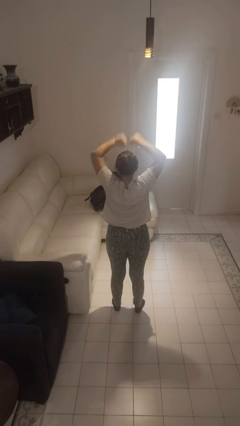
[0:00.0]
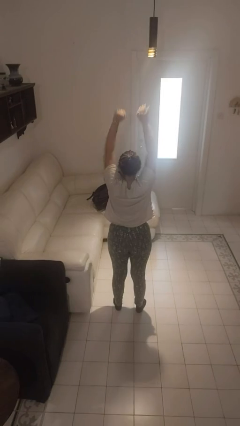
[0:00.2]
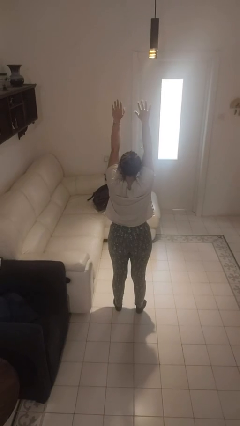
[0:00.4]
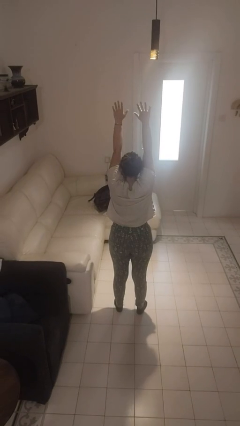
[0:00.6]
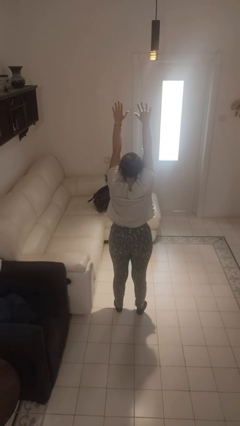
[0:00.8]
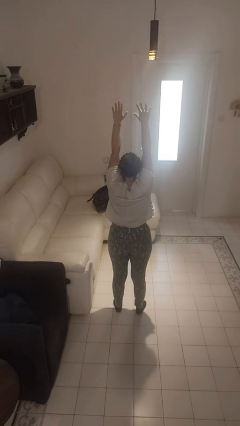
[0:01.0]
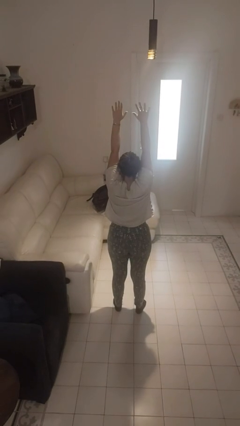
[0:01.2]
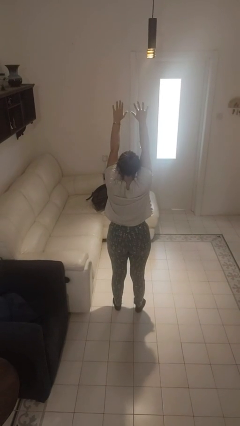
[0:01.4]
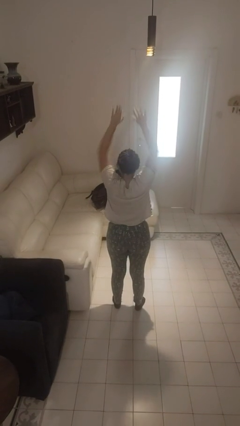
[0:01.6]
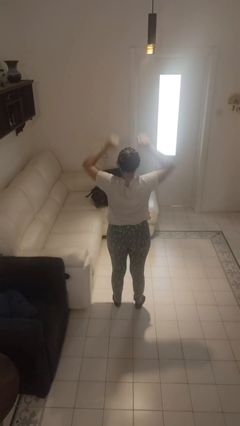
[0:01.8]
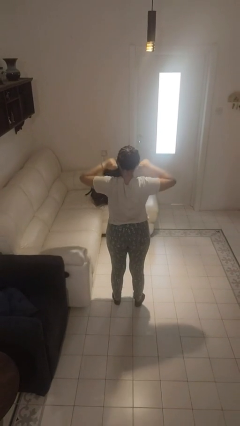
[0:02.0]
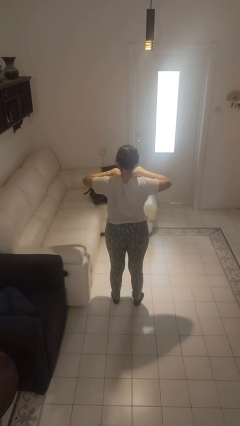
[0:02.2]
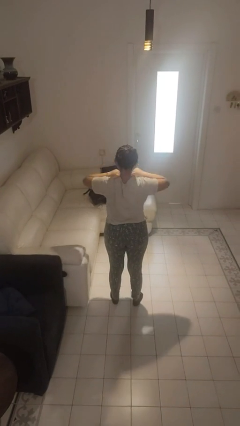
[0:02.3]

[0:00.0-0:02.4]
person stretches arms over head

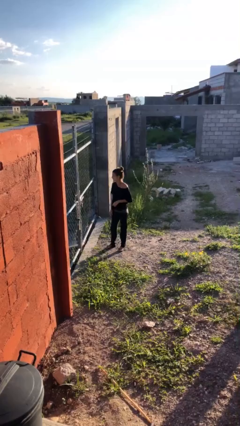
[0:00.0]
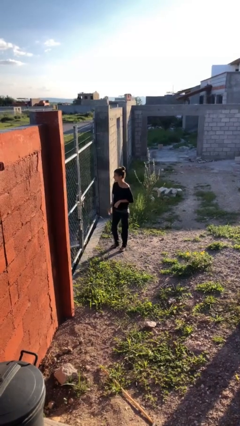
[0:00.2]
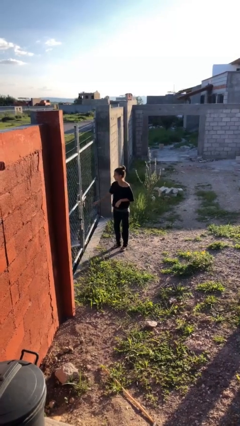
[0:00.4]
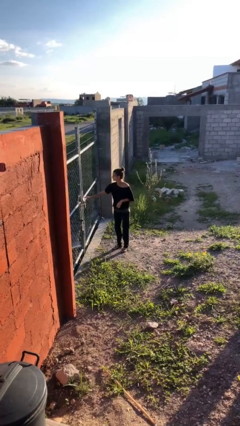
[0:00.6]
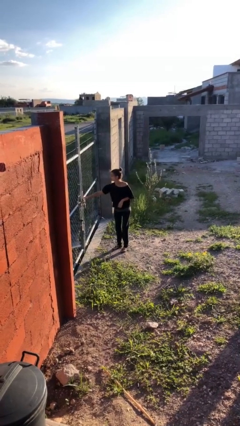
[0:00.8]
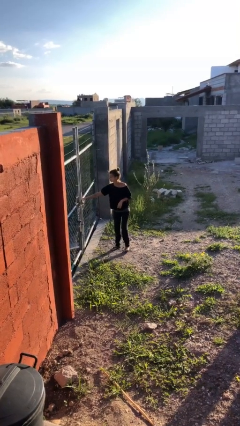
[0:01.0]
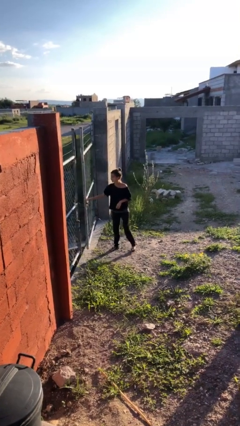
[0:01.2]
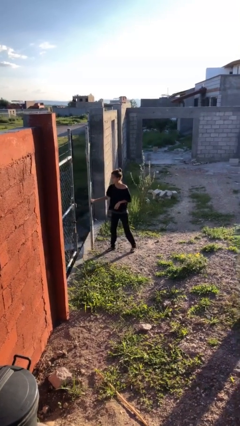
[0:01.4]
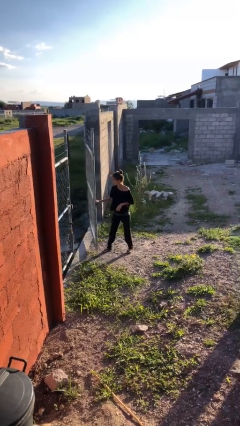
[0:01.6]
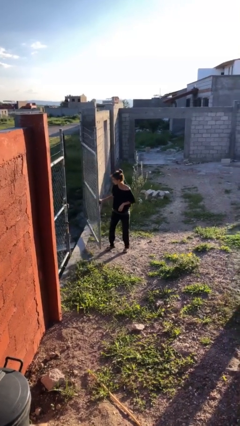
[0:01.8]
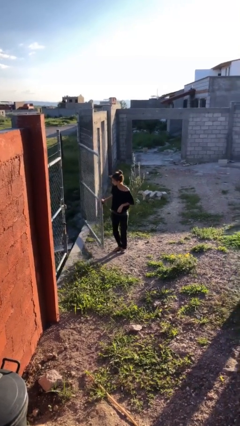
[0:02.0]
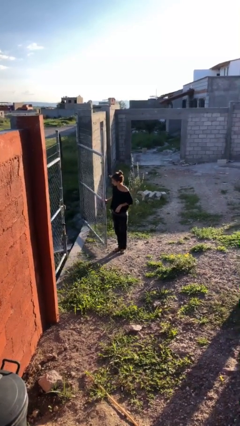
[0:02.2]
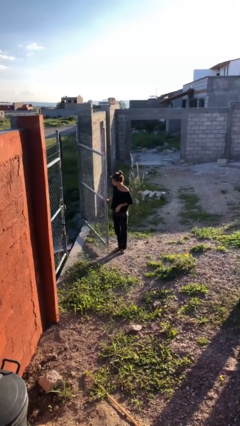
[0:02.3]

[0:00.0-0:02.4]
person opens gate

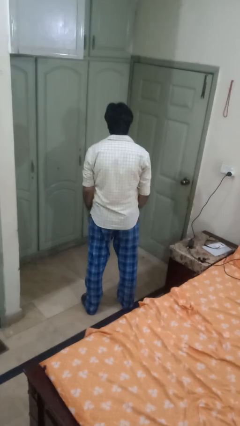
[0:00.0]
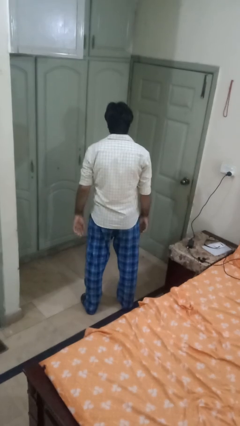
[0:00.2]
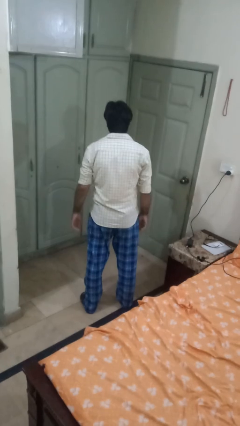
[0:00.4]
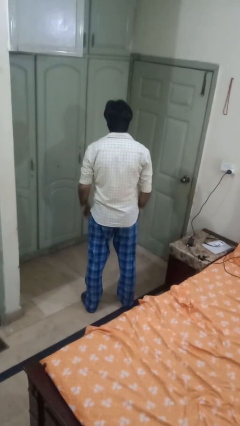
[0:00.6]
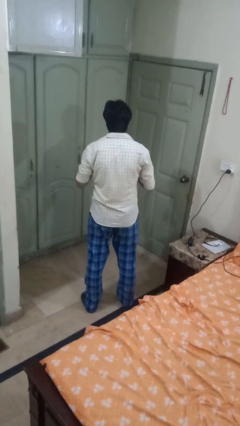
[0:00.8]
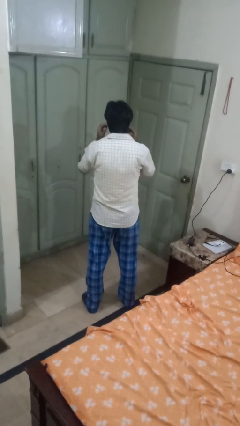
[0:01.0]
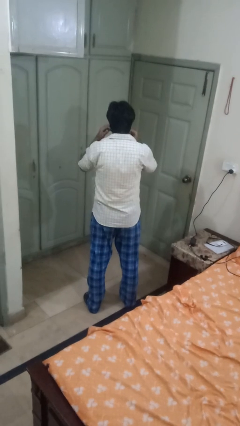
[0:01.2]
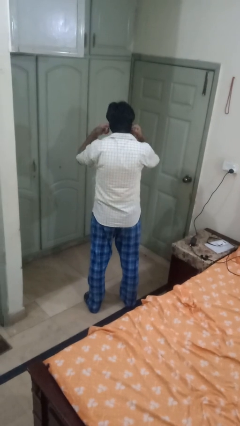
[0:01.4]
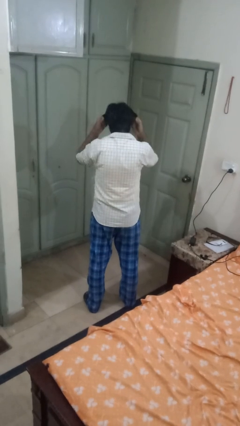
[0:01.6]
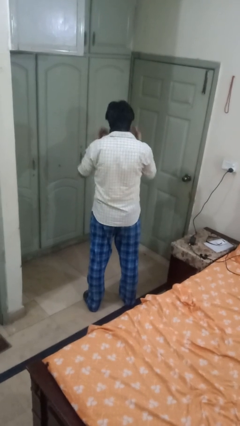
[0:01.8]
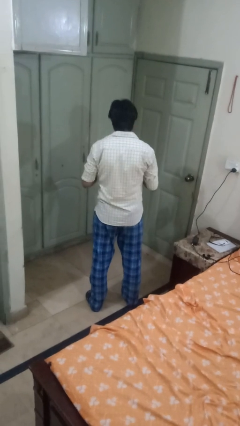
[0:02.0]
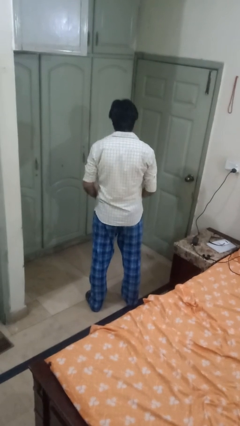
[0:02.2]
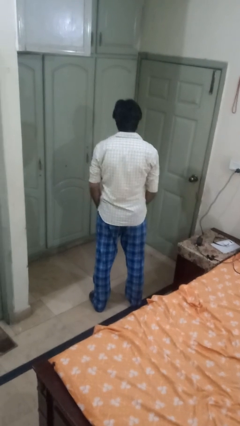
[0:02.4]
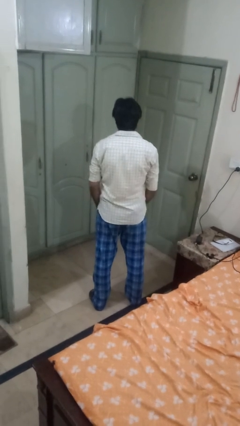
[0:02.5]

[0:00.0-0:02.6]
person takes off facemask

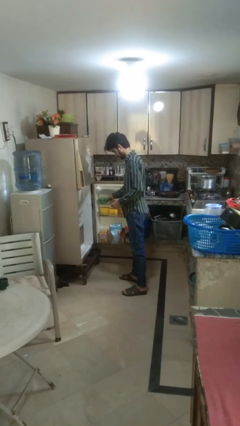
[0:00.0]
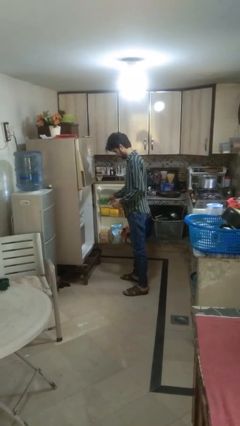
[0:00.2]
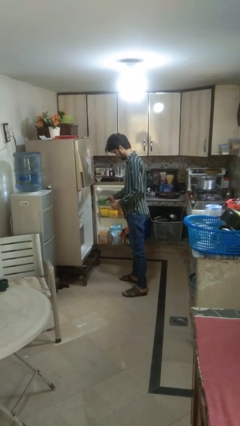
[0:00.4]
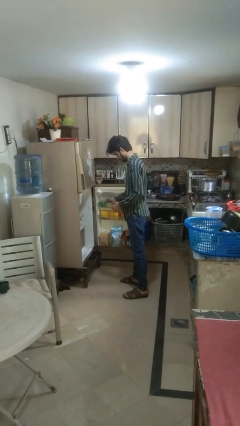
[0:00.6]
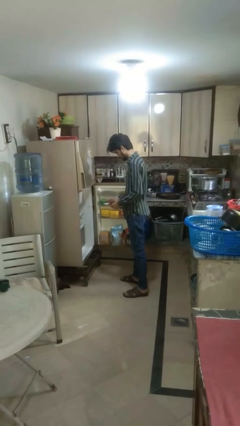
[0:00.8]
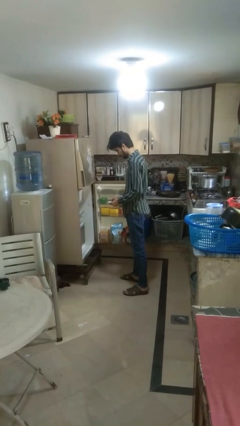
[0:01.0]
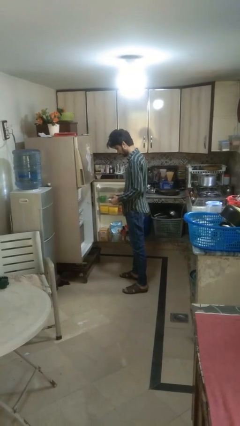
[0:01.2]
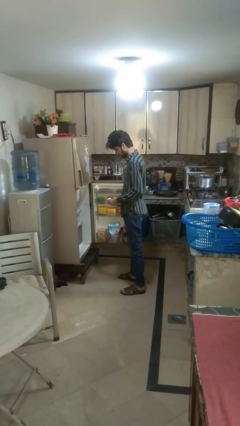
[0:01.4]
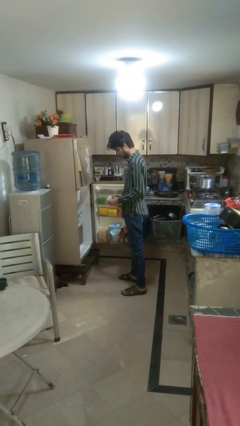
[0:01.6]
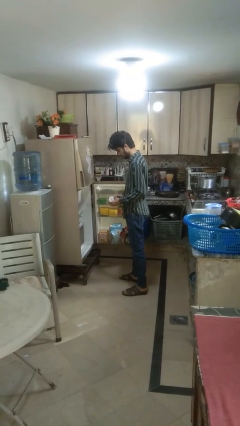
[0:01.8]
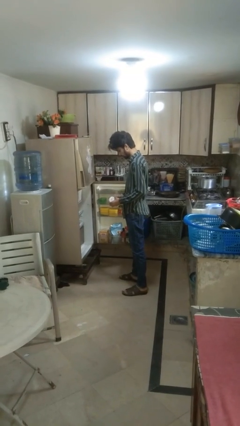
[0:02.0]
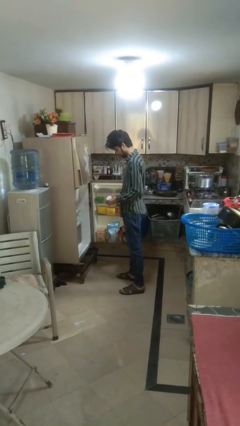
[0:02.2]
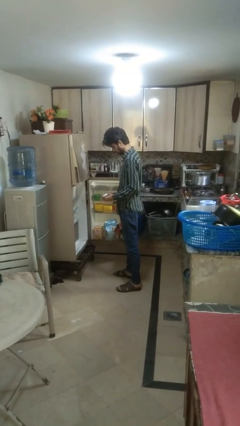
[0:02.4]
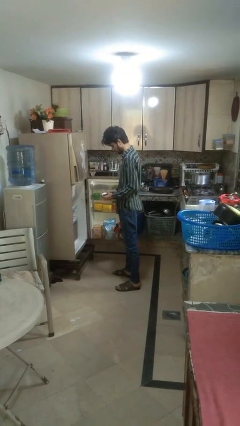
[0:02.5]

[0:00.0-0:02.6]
person takes object from refrigerator

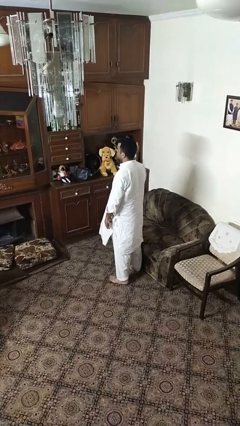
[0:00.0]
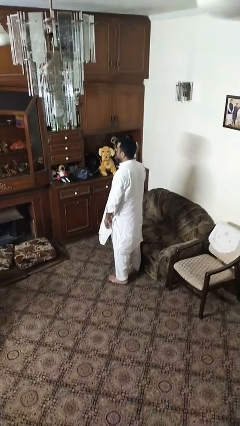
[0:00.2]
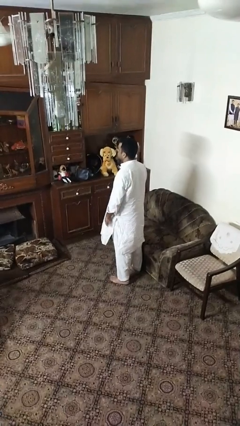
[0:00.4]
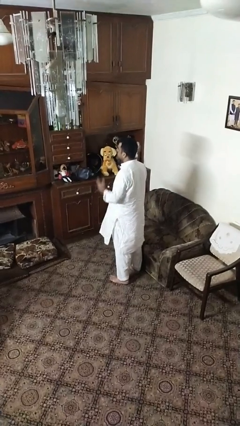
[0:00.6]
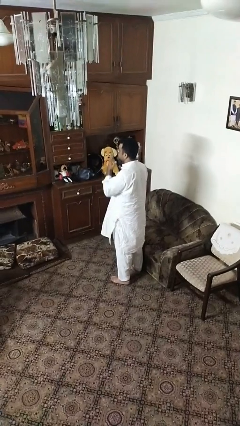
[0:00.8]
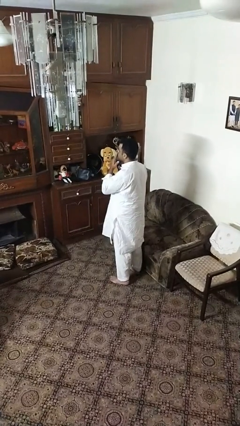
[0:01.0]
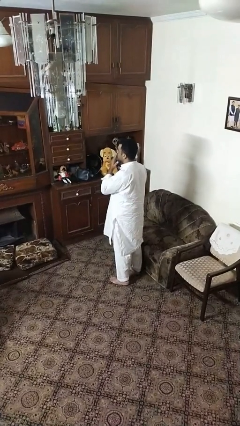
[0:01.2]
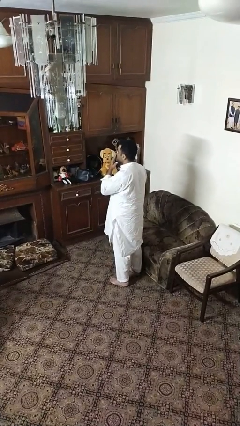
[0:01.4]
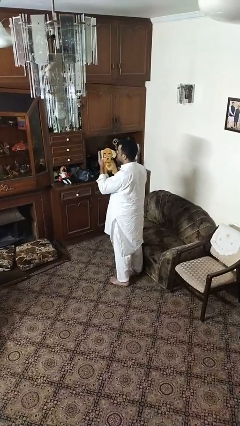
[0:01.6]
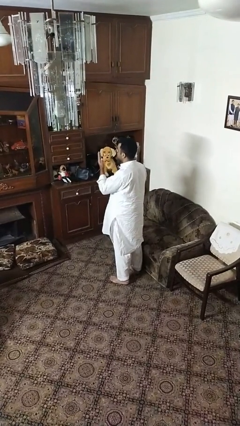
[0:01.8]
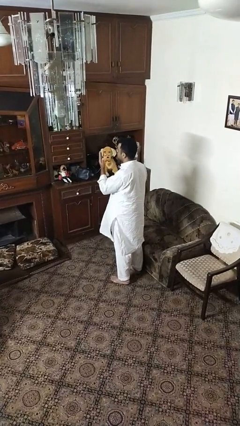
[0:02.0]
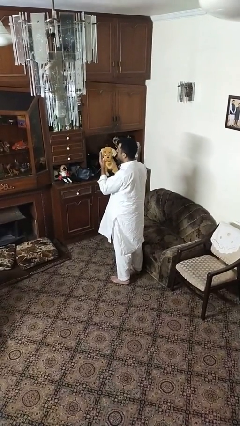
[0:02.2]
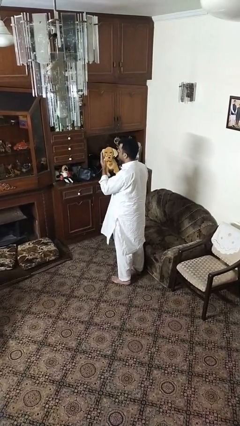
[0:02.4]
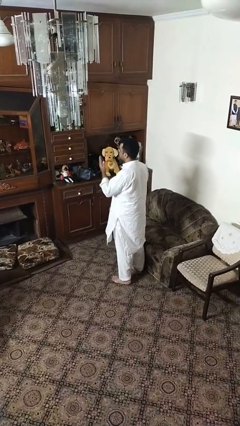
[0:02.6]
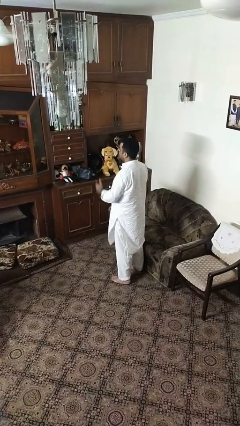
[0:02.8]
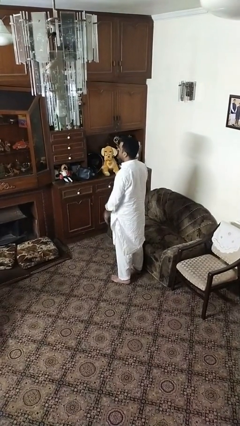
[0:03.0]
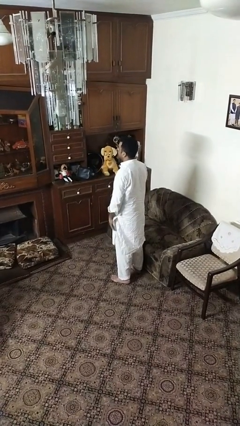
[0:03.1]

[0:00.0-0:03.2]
person gestures blow kiss

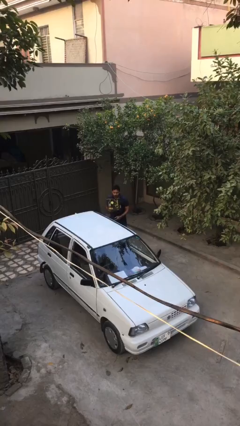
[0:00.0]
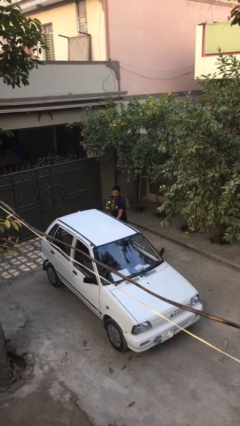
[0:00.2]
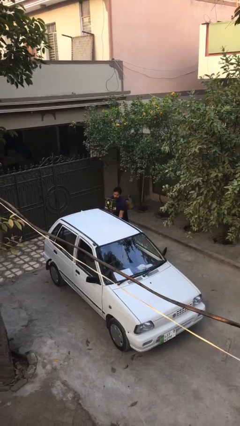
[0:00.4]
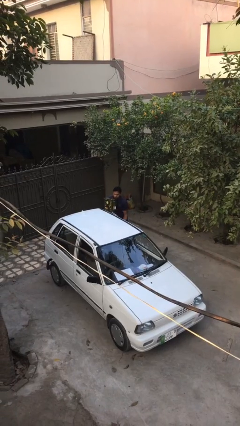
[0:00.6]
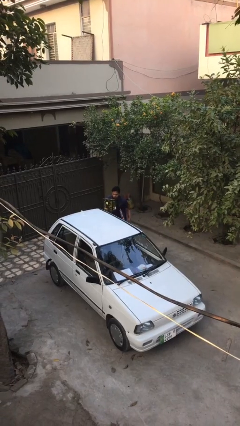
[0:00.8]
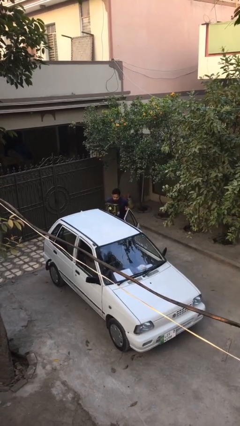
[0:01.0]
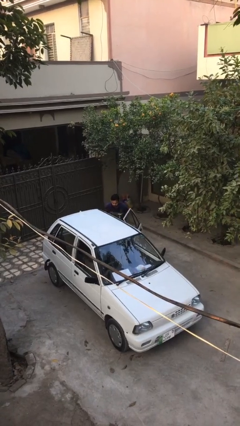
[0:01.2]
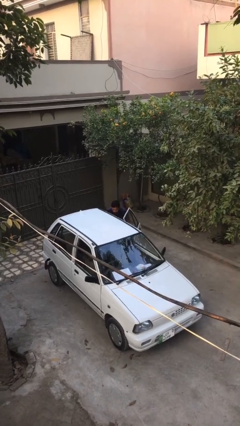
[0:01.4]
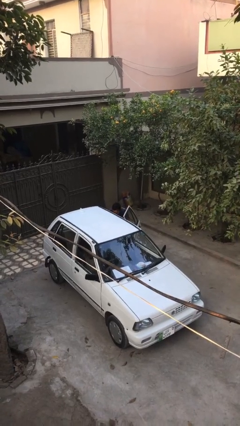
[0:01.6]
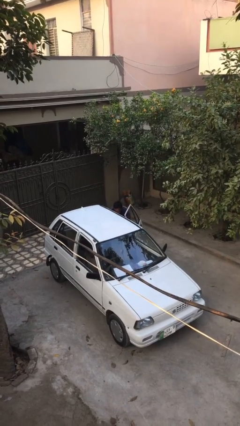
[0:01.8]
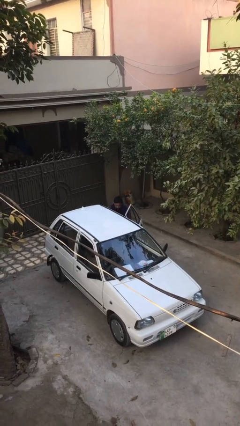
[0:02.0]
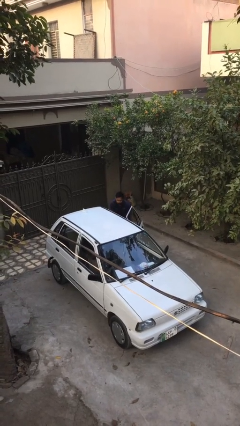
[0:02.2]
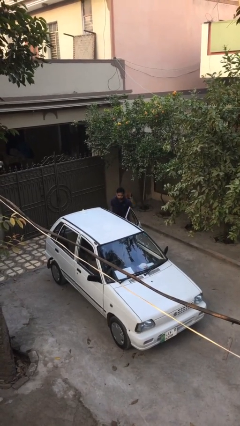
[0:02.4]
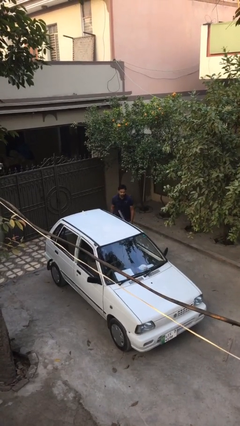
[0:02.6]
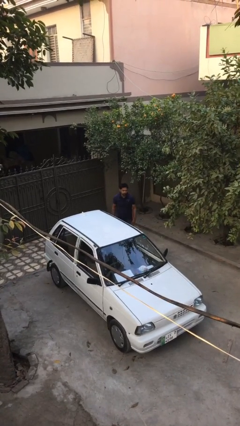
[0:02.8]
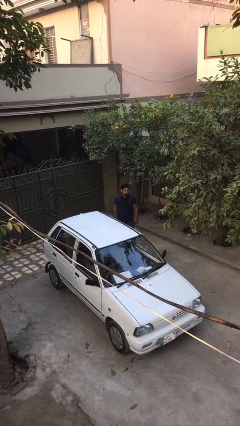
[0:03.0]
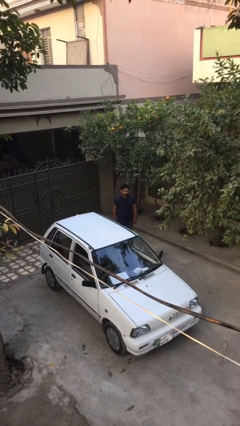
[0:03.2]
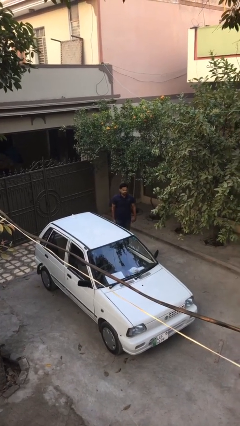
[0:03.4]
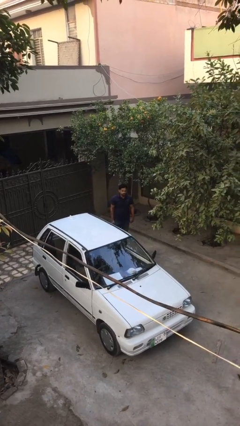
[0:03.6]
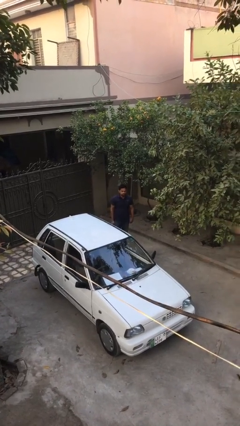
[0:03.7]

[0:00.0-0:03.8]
person loads car

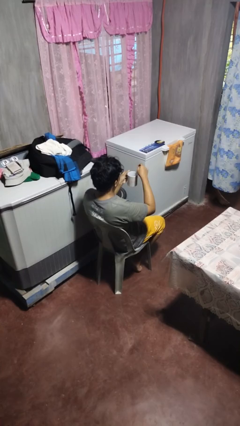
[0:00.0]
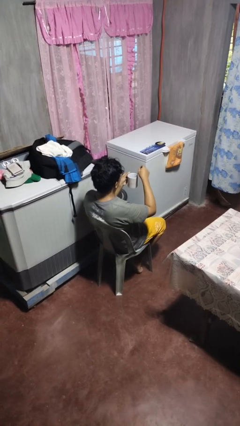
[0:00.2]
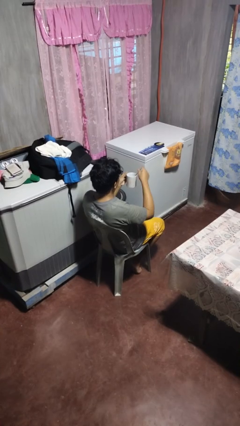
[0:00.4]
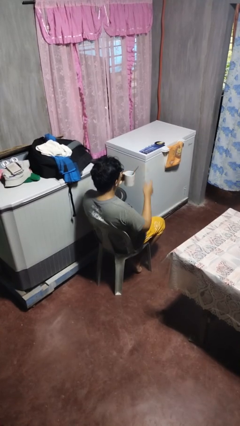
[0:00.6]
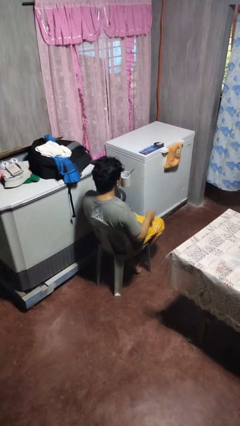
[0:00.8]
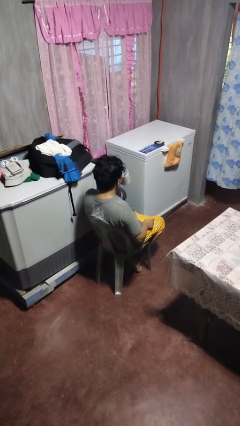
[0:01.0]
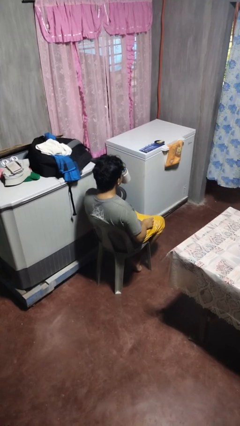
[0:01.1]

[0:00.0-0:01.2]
person drinks from mug
